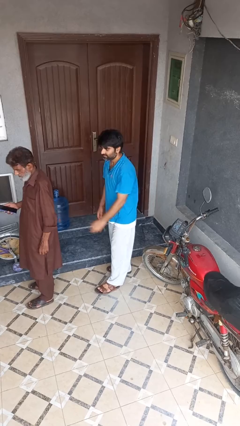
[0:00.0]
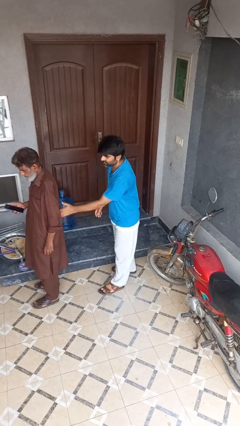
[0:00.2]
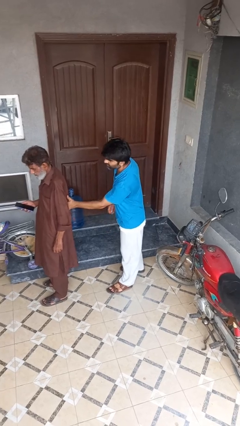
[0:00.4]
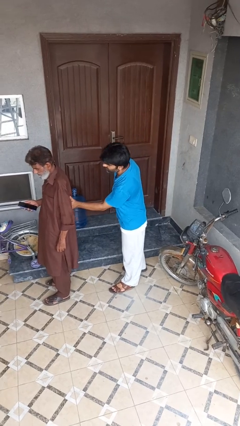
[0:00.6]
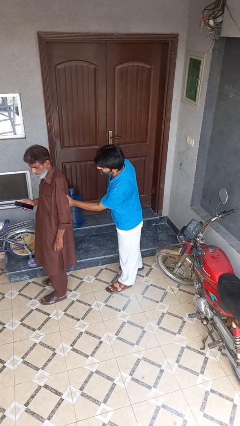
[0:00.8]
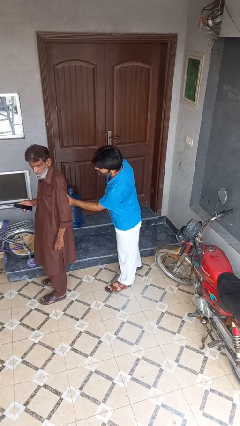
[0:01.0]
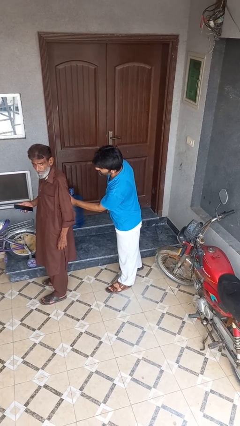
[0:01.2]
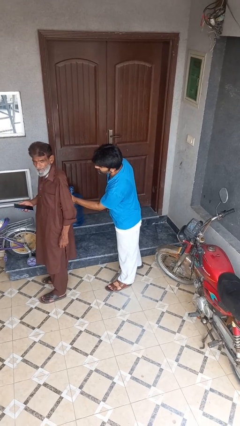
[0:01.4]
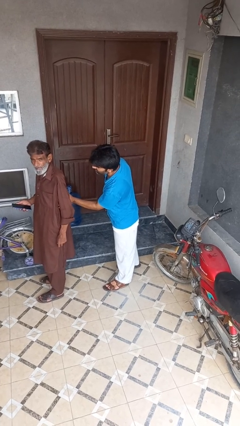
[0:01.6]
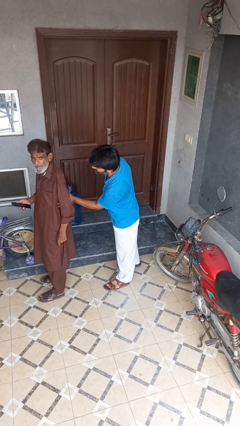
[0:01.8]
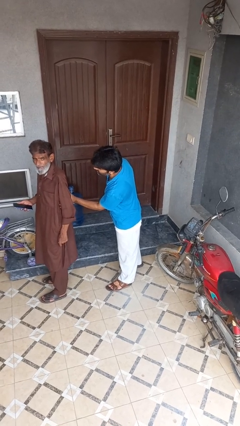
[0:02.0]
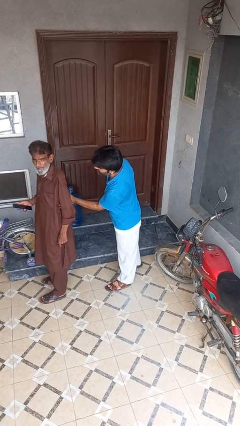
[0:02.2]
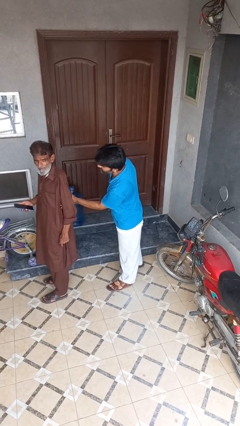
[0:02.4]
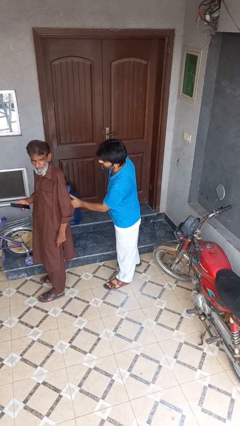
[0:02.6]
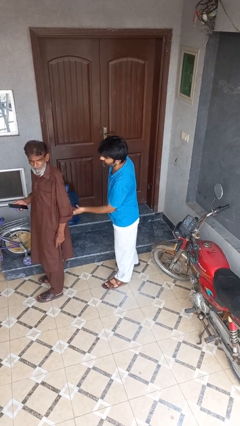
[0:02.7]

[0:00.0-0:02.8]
person touches back of person

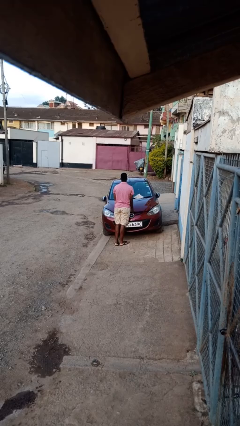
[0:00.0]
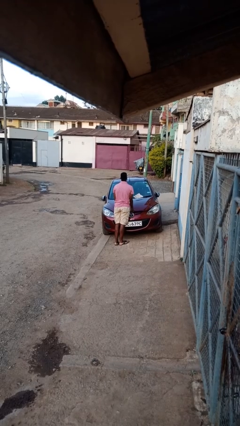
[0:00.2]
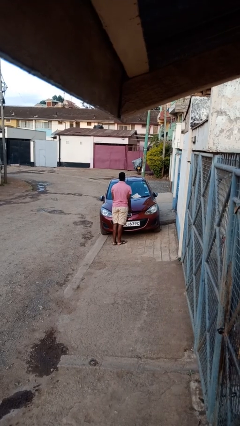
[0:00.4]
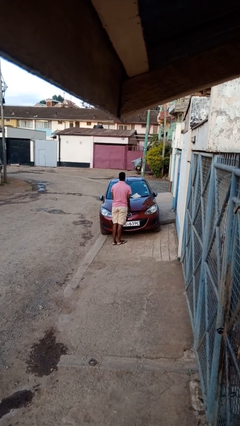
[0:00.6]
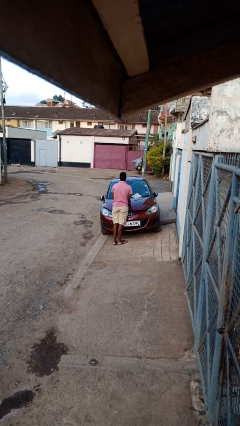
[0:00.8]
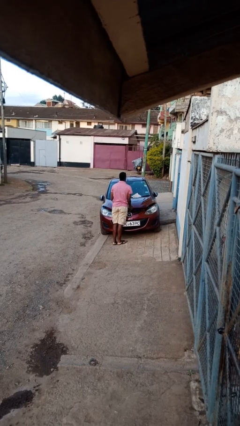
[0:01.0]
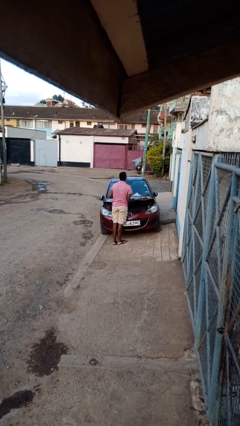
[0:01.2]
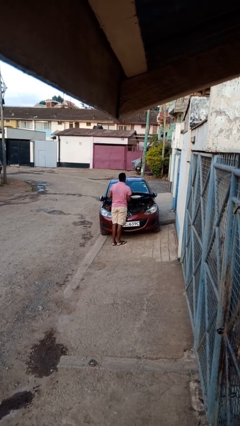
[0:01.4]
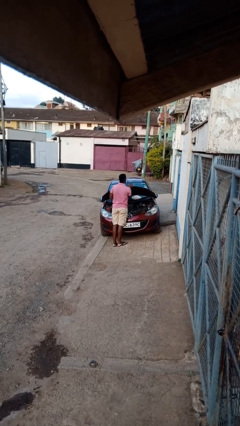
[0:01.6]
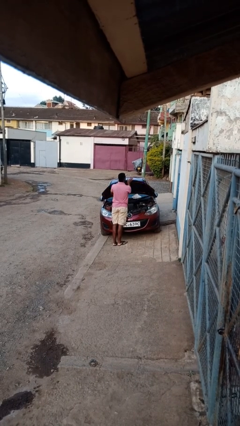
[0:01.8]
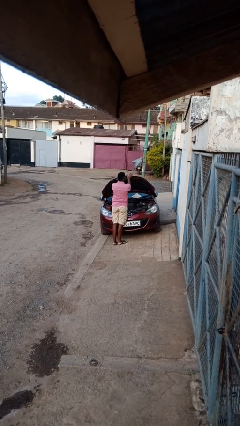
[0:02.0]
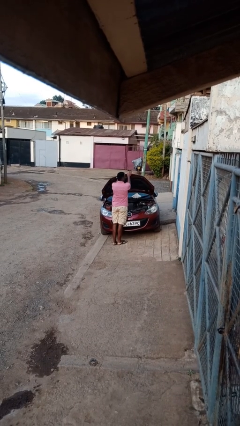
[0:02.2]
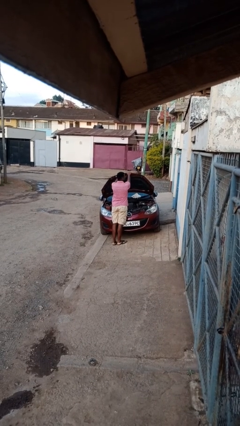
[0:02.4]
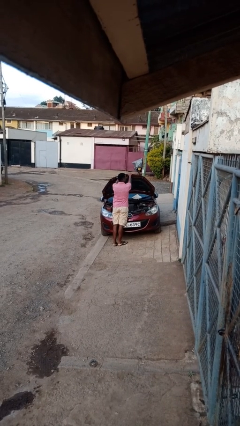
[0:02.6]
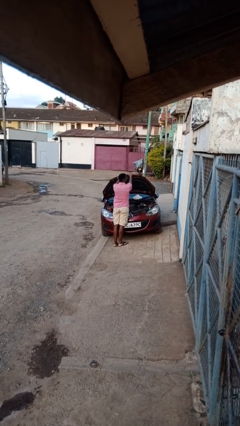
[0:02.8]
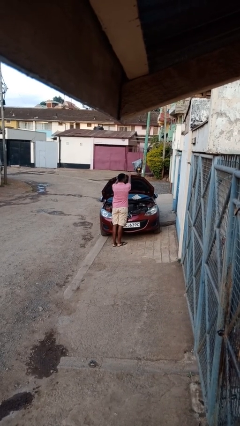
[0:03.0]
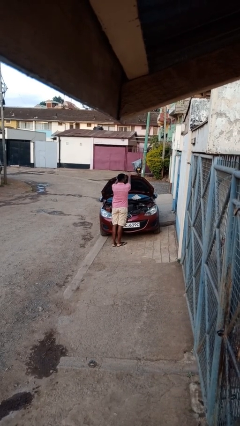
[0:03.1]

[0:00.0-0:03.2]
person opens car hood

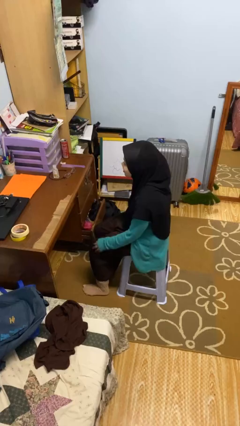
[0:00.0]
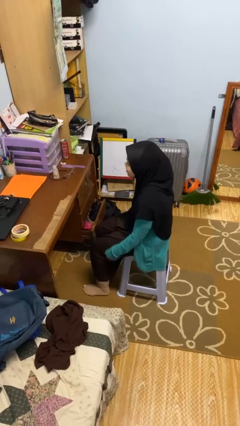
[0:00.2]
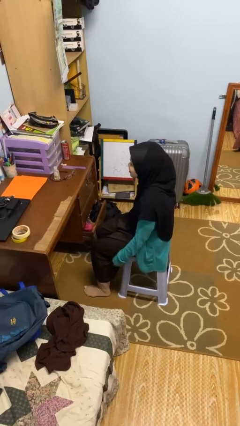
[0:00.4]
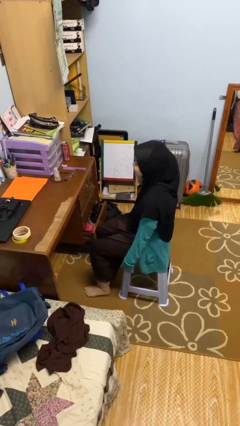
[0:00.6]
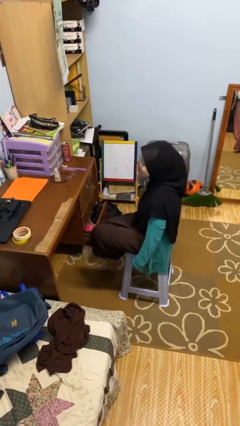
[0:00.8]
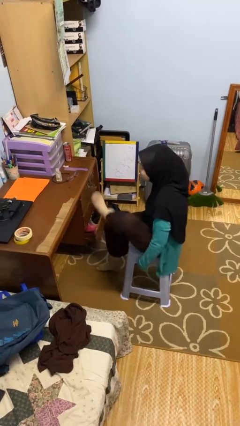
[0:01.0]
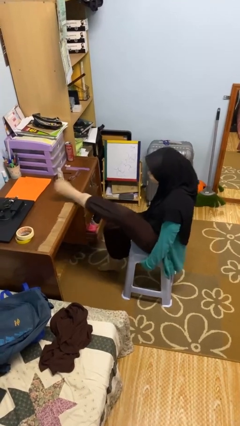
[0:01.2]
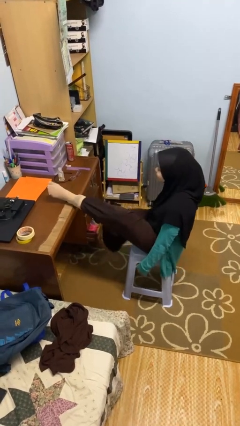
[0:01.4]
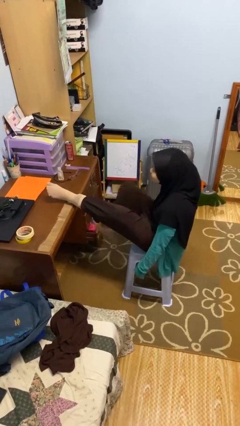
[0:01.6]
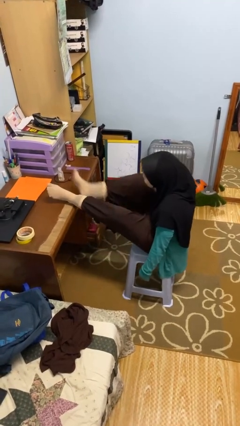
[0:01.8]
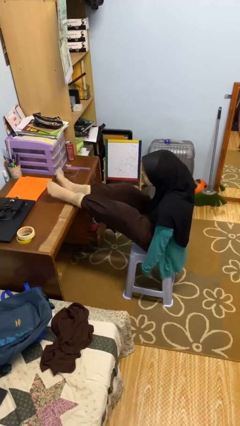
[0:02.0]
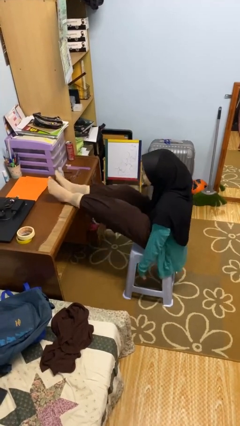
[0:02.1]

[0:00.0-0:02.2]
person puts feet up

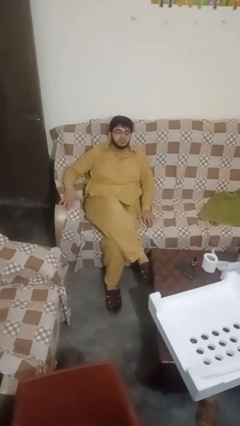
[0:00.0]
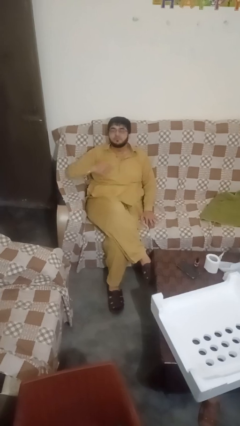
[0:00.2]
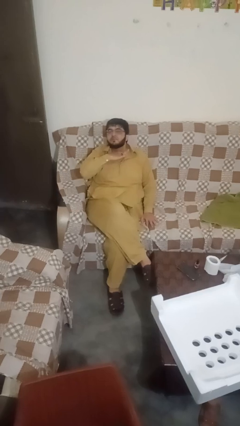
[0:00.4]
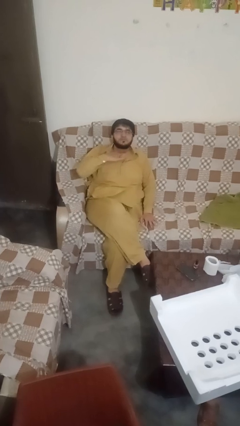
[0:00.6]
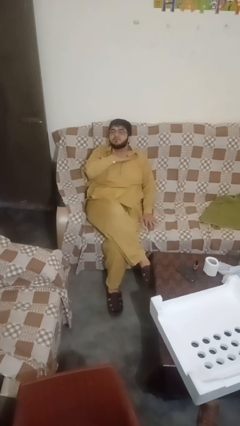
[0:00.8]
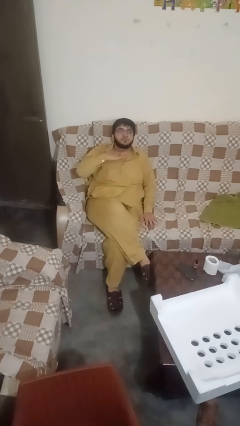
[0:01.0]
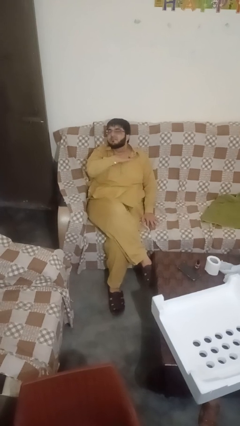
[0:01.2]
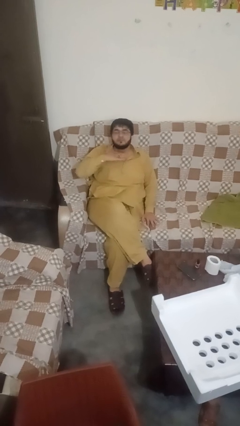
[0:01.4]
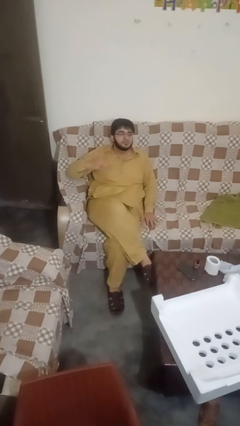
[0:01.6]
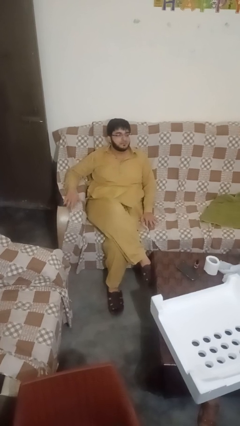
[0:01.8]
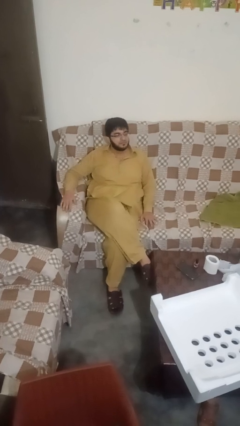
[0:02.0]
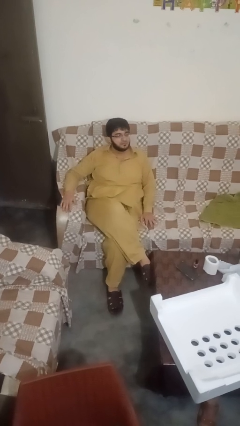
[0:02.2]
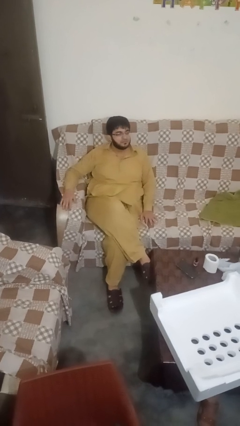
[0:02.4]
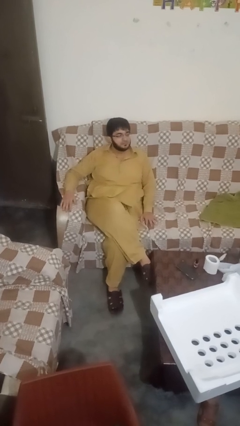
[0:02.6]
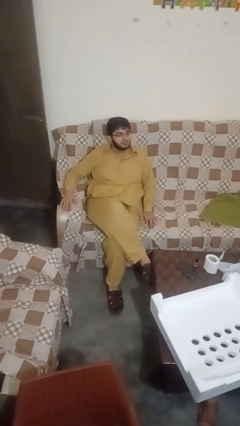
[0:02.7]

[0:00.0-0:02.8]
person gestures cut

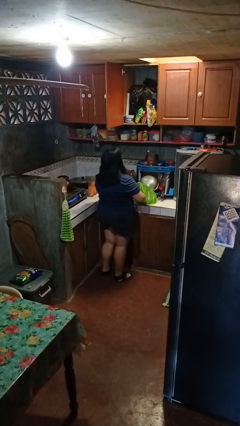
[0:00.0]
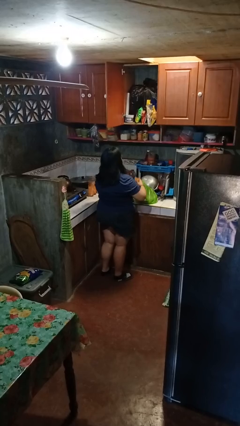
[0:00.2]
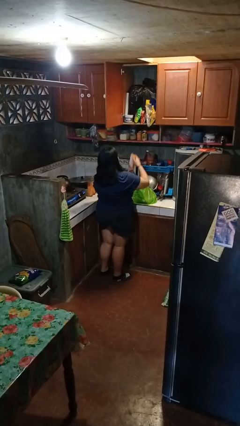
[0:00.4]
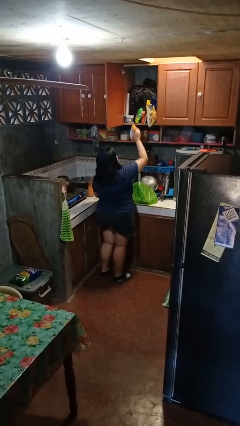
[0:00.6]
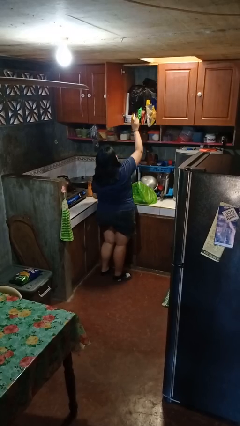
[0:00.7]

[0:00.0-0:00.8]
person loads groceries into cabinet

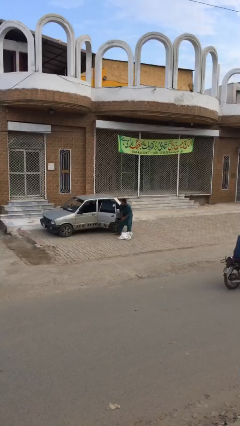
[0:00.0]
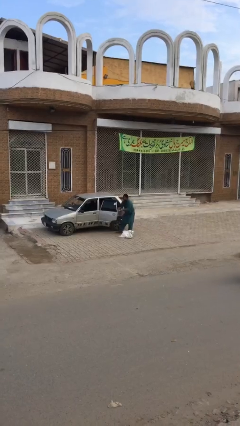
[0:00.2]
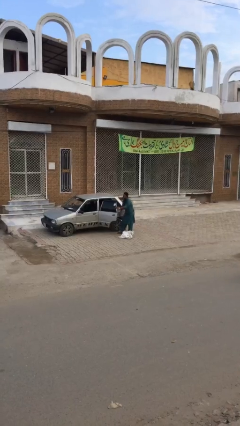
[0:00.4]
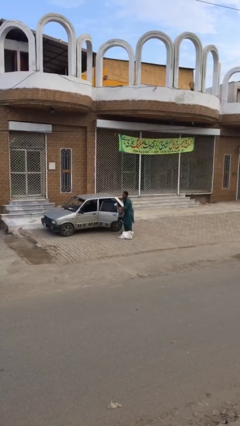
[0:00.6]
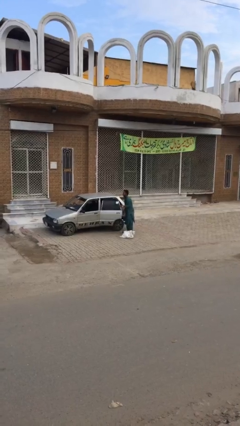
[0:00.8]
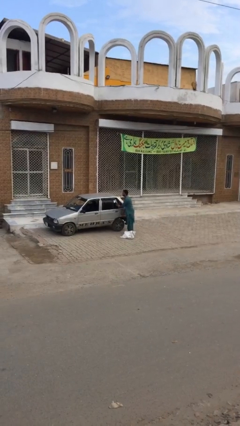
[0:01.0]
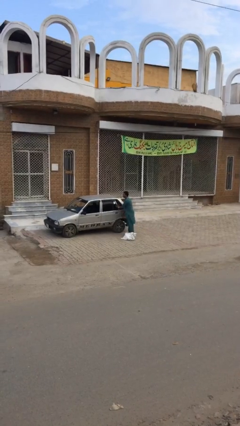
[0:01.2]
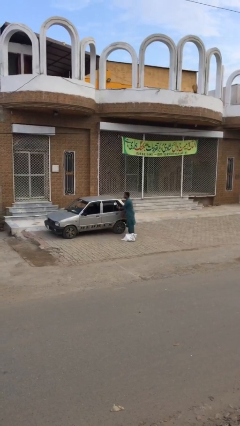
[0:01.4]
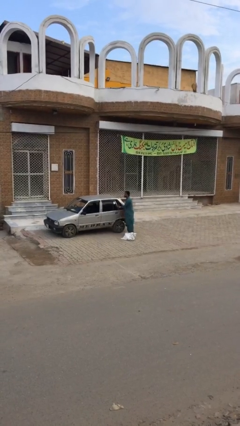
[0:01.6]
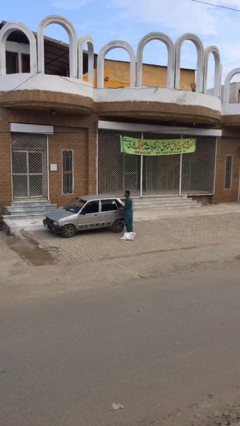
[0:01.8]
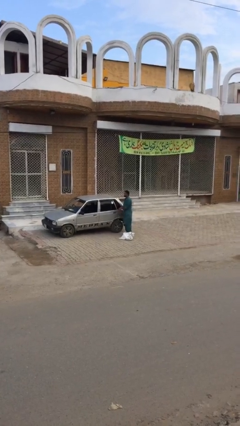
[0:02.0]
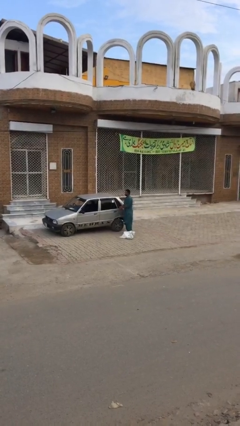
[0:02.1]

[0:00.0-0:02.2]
person closes car door

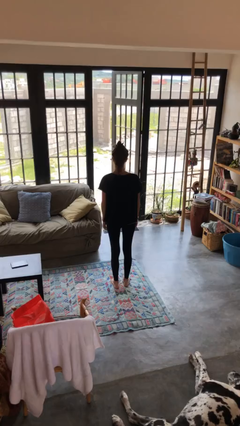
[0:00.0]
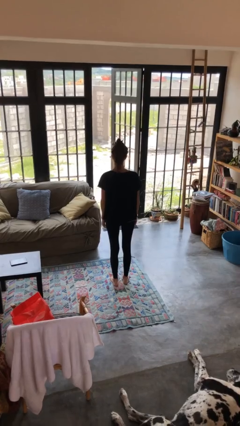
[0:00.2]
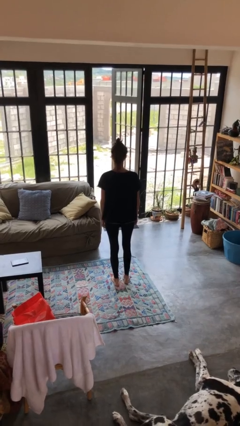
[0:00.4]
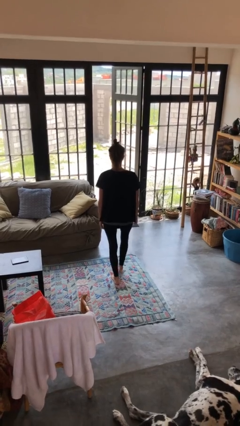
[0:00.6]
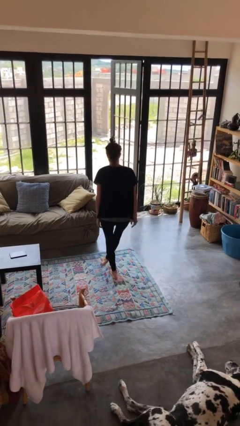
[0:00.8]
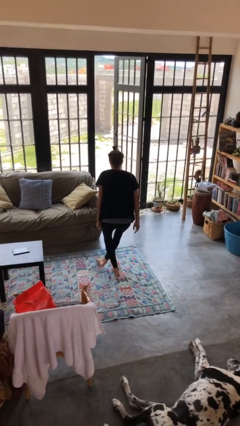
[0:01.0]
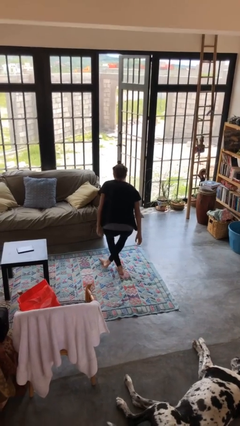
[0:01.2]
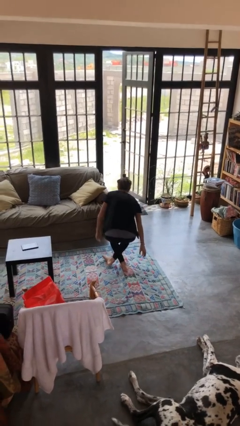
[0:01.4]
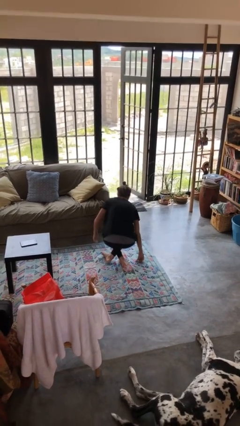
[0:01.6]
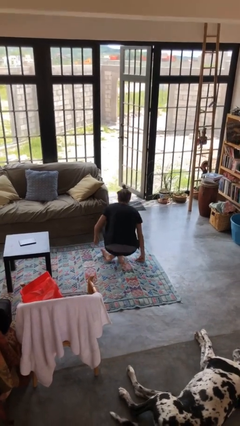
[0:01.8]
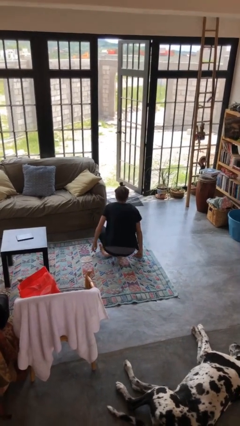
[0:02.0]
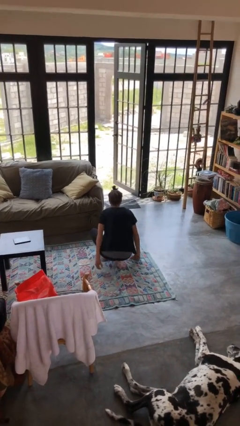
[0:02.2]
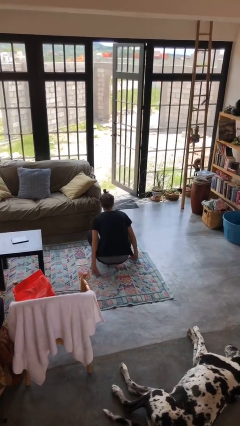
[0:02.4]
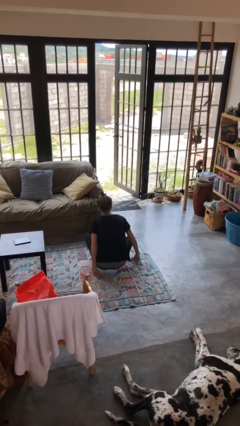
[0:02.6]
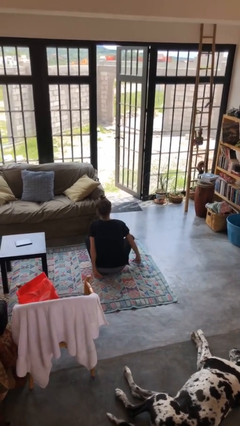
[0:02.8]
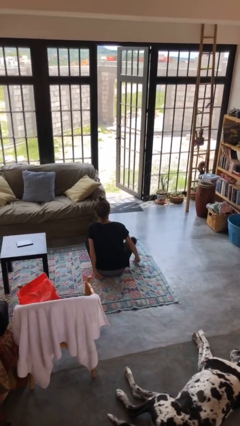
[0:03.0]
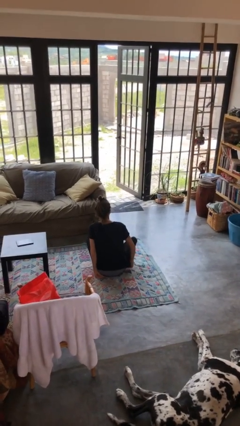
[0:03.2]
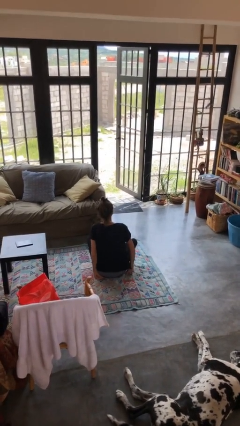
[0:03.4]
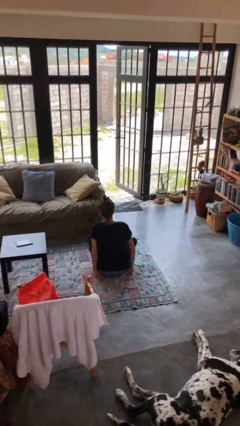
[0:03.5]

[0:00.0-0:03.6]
person sits crisscross
